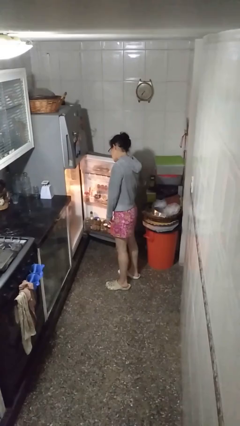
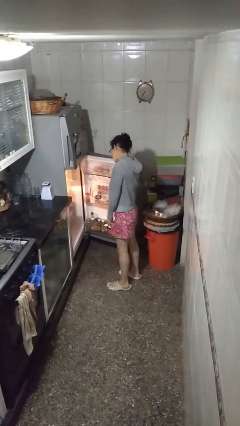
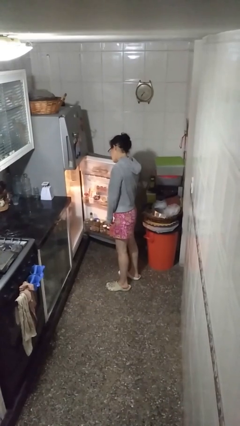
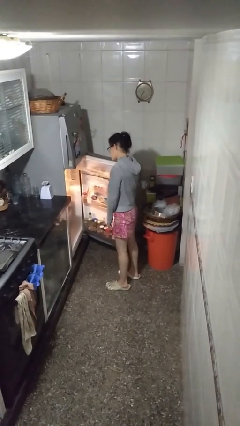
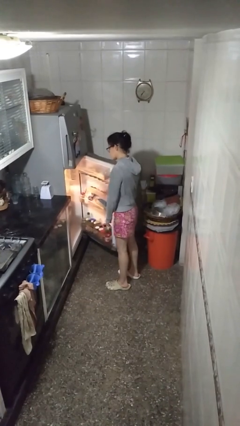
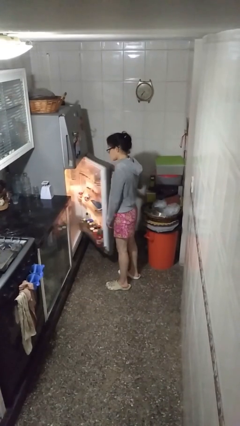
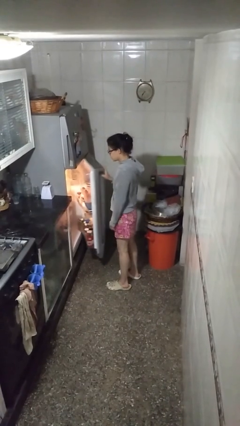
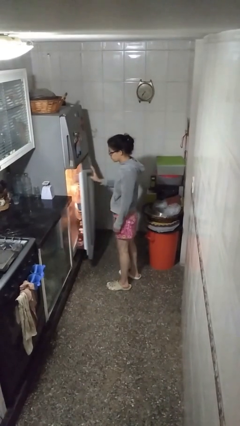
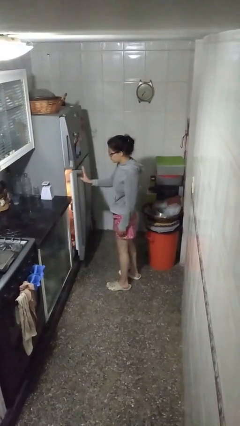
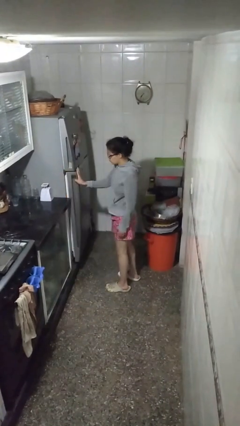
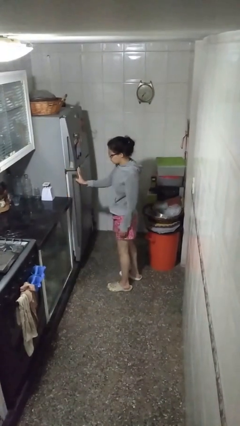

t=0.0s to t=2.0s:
person closes refrigerator

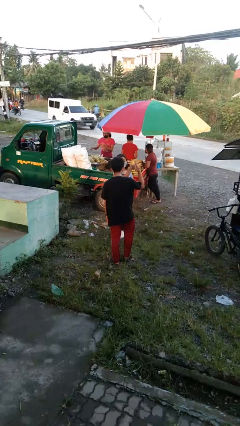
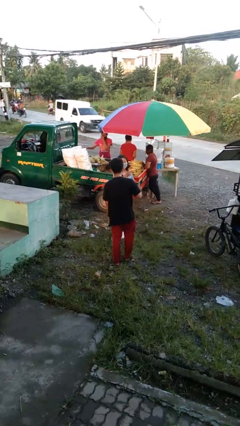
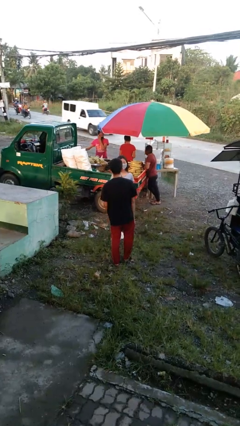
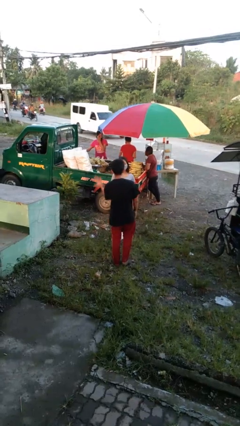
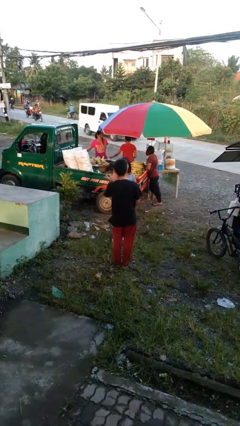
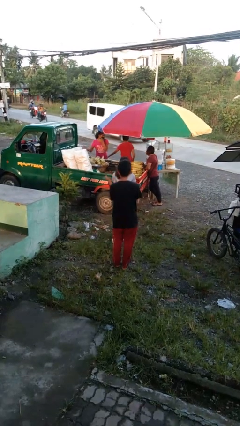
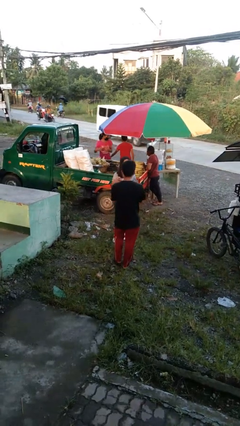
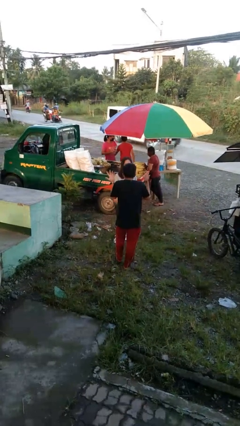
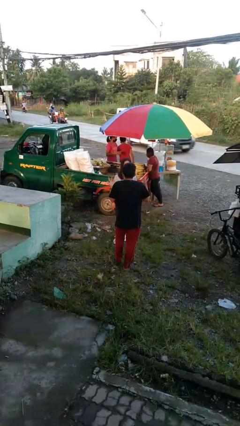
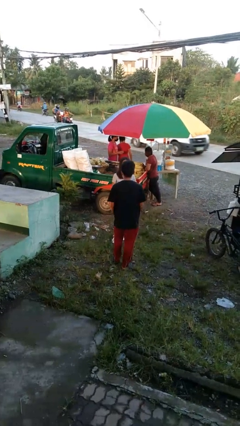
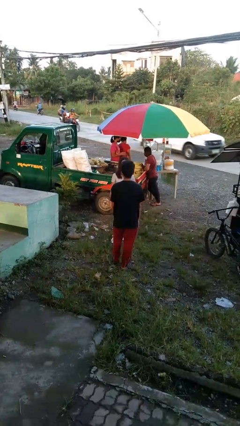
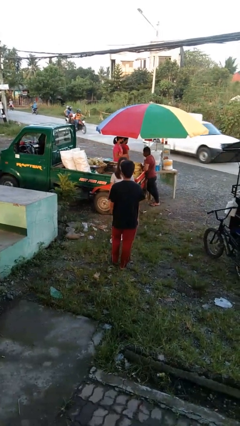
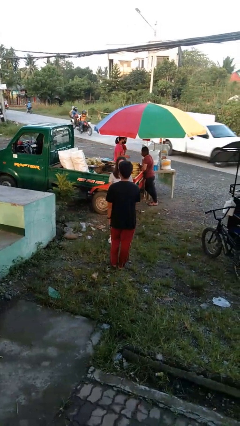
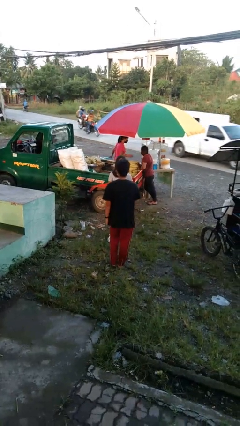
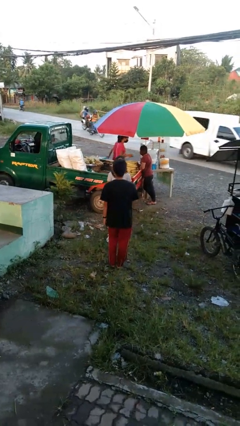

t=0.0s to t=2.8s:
person talks to person

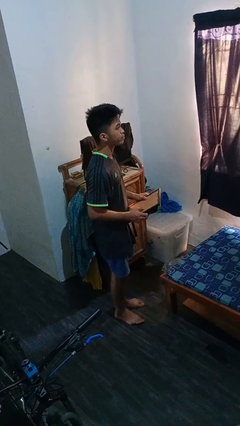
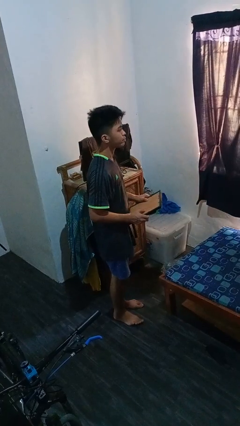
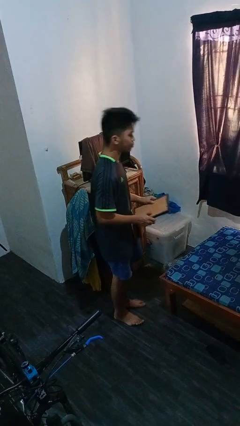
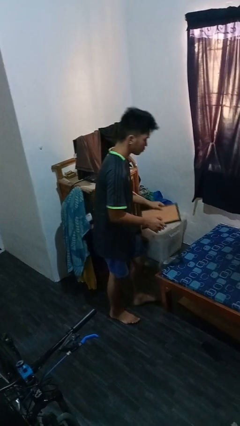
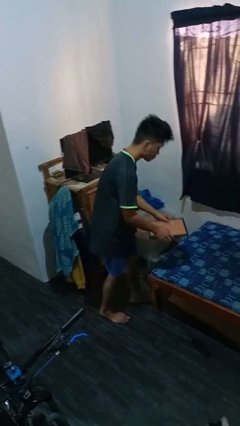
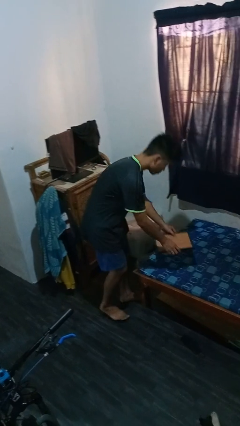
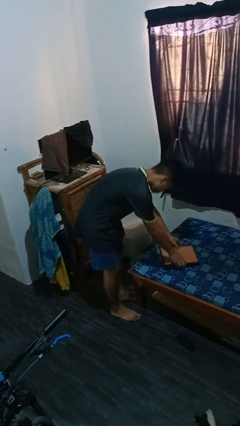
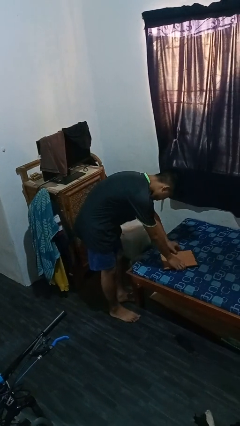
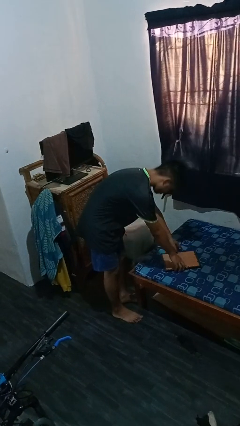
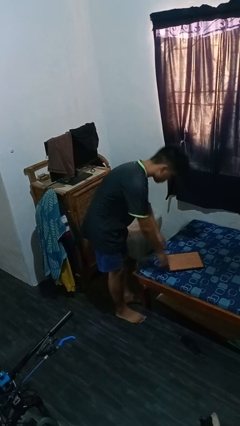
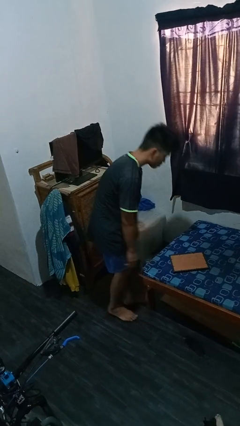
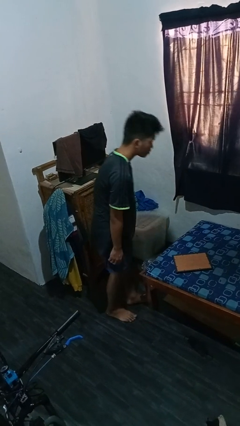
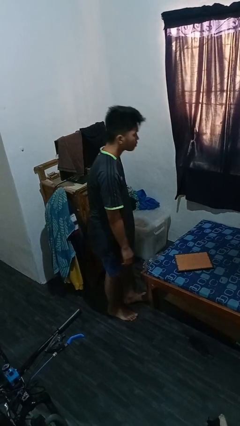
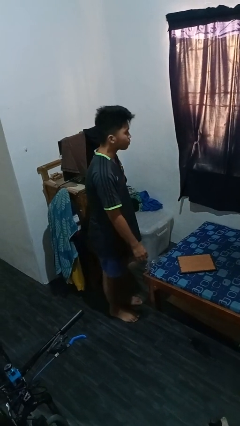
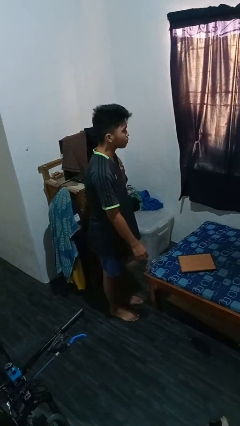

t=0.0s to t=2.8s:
person puts down object on bed

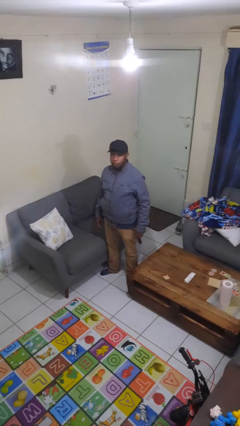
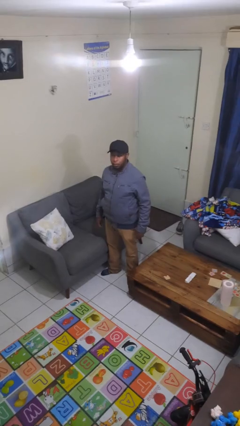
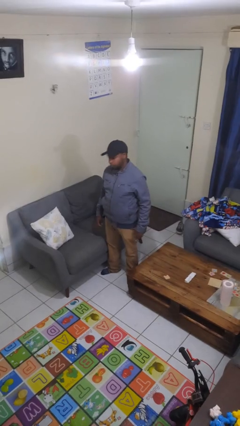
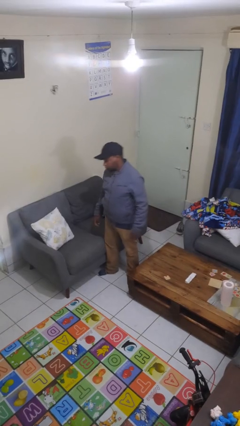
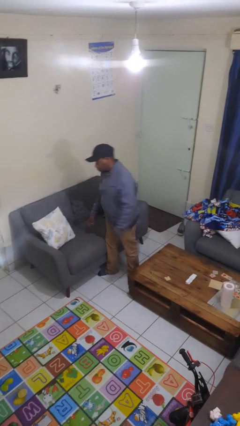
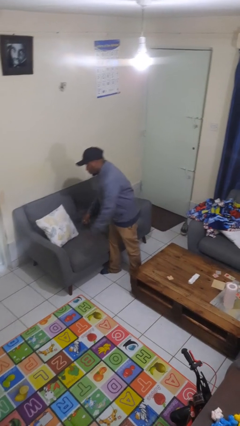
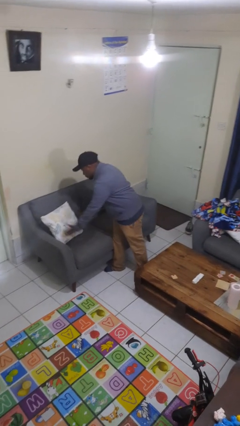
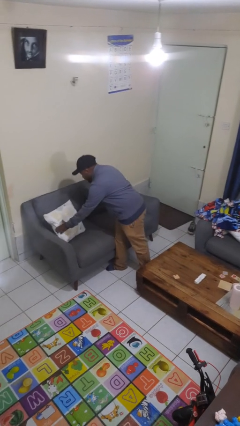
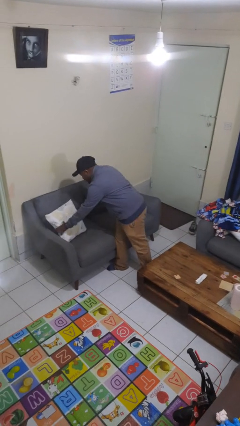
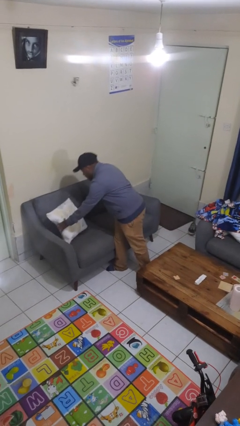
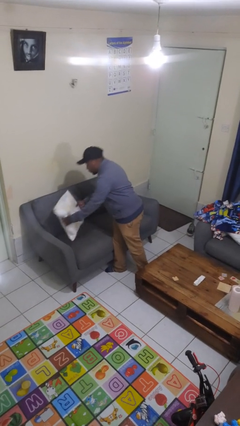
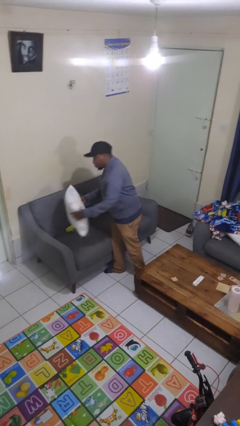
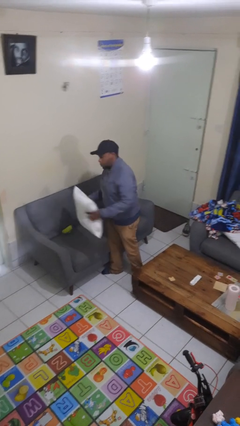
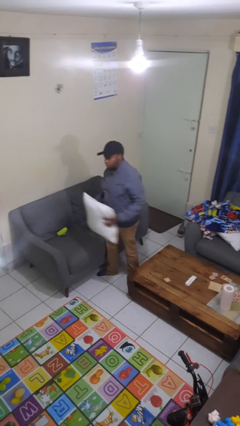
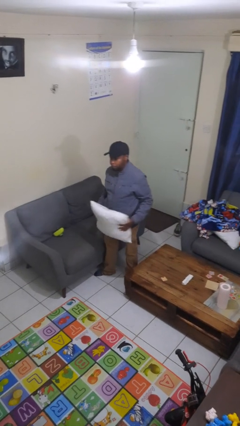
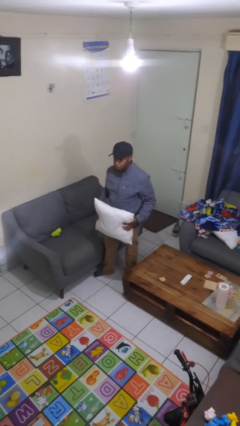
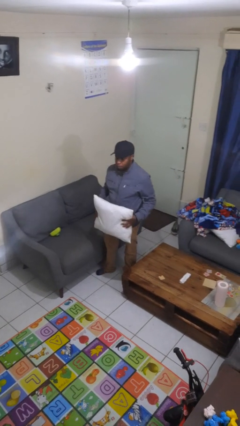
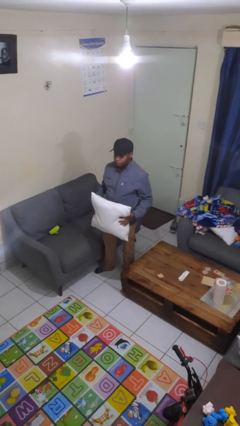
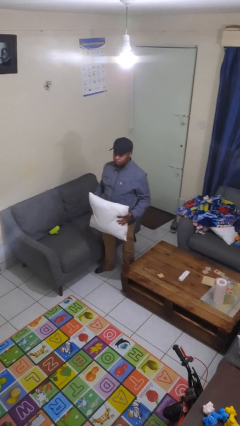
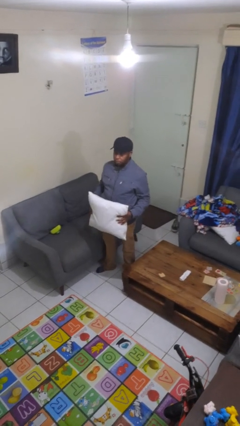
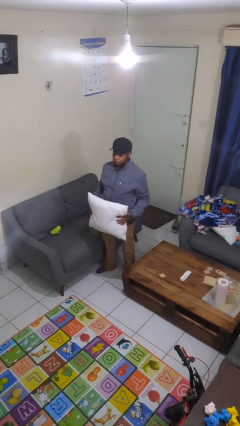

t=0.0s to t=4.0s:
person picks up object from couch

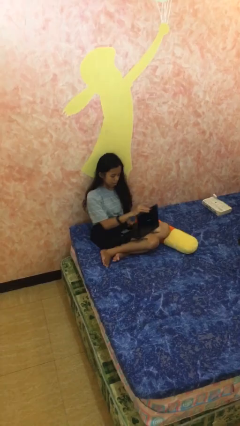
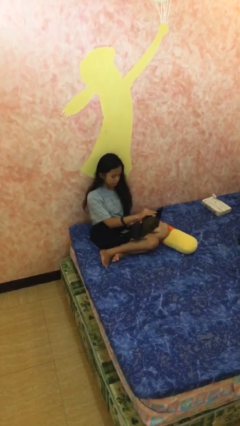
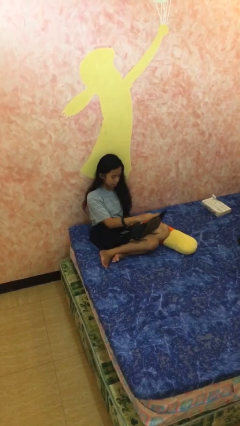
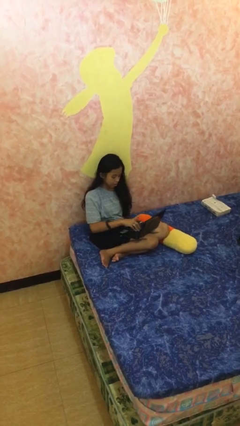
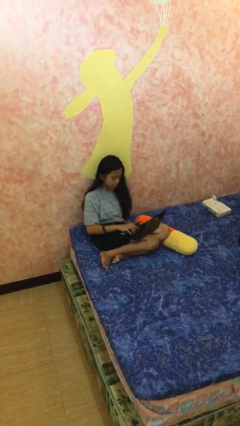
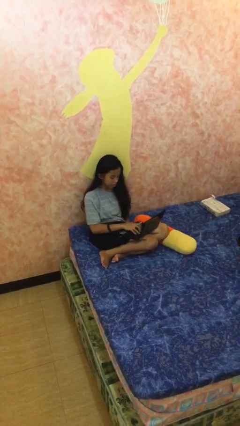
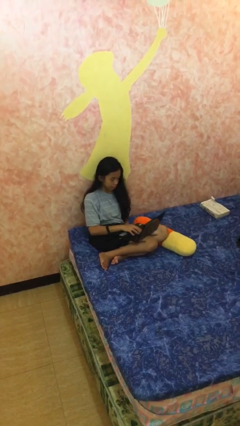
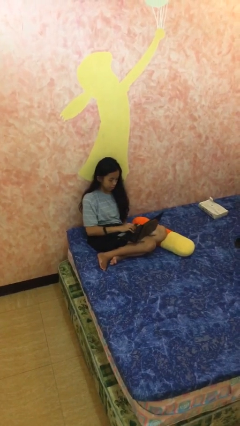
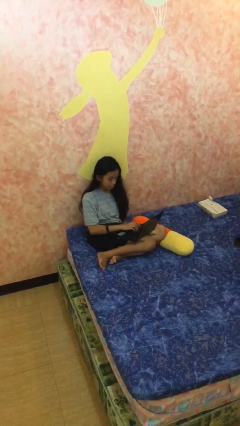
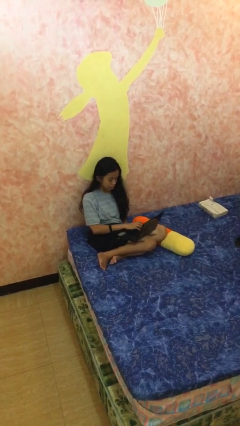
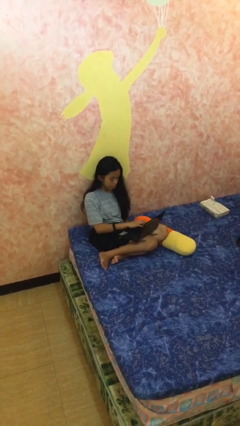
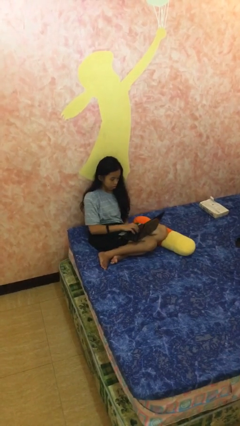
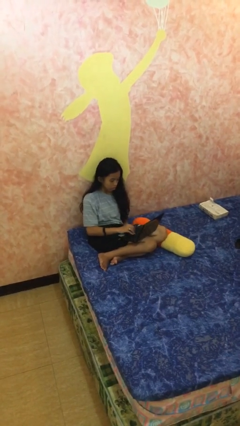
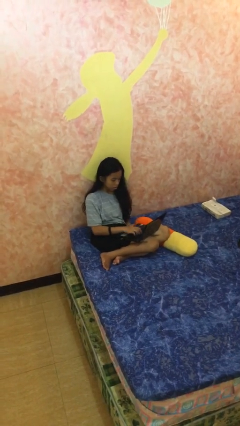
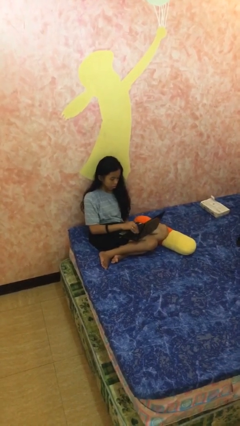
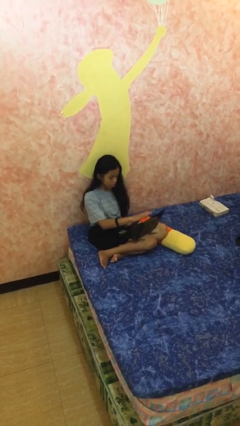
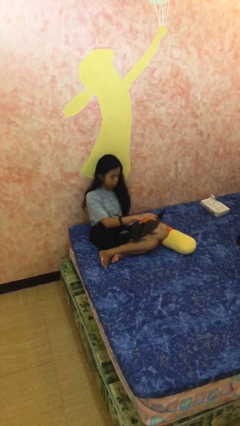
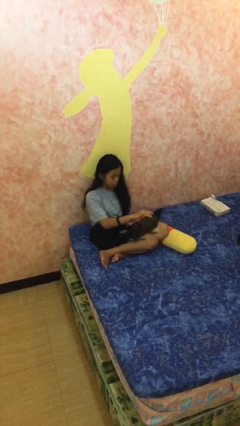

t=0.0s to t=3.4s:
person interacts with laptop

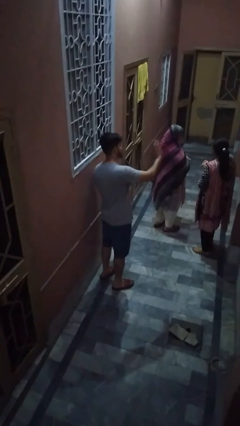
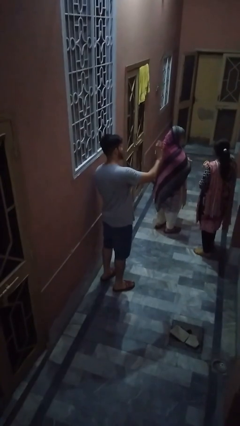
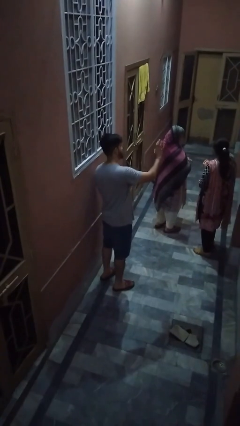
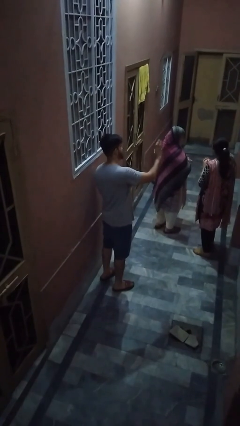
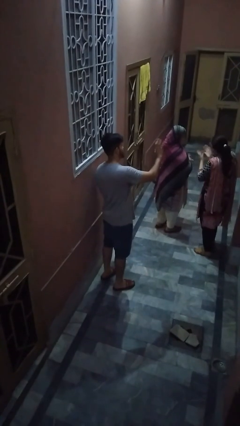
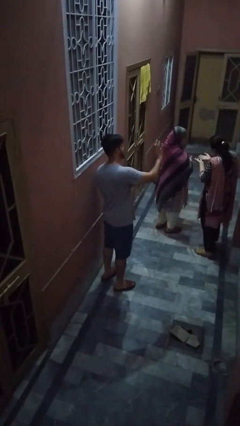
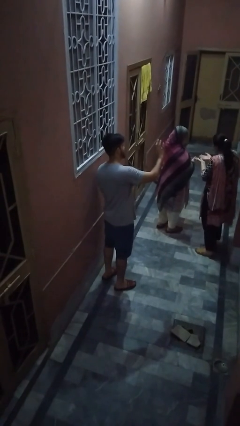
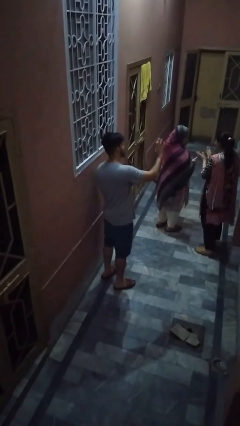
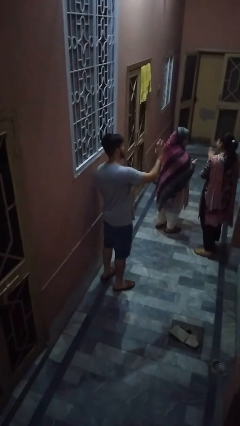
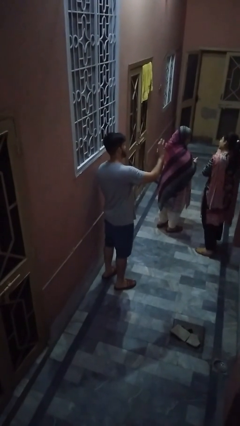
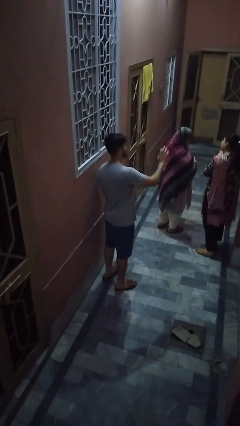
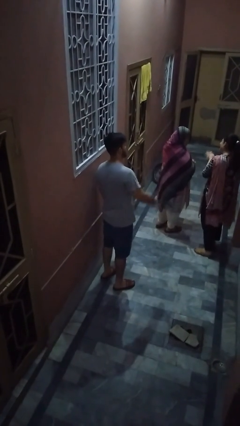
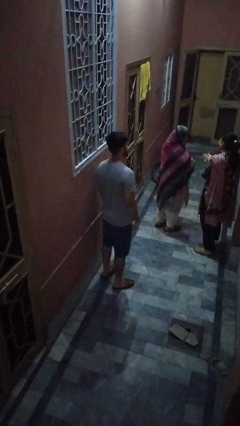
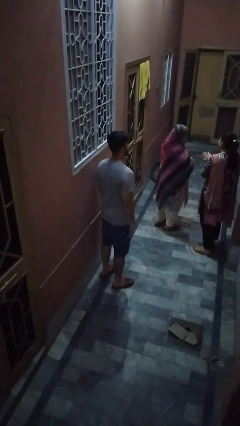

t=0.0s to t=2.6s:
person waves at person

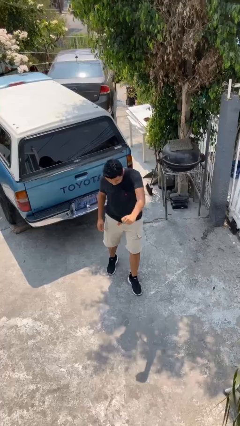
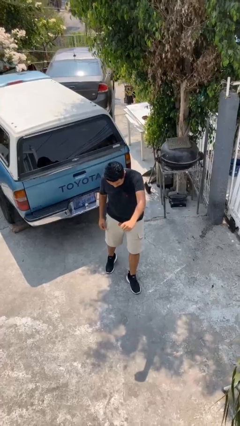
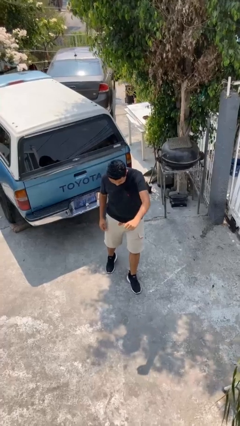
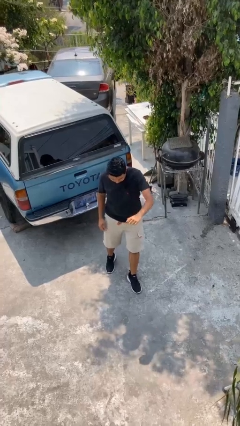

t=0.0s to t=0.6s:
person karate chop
